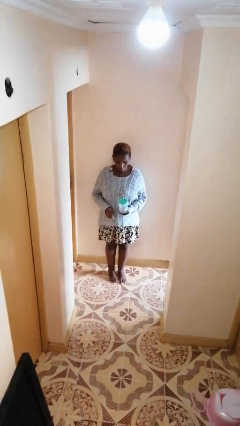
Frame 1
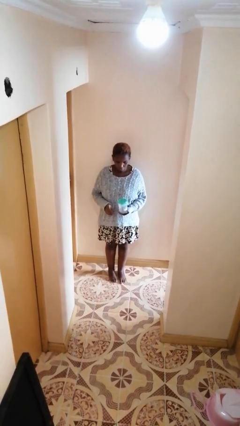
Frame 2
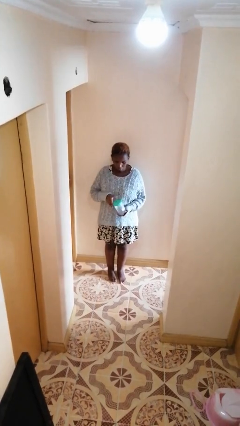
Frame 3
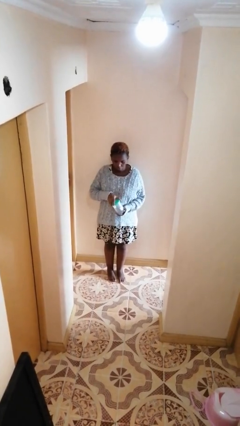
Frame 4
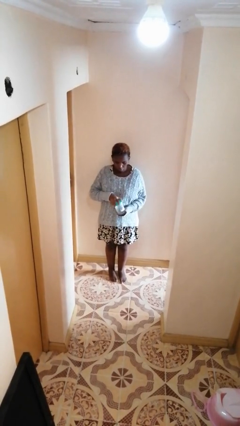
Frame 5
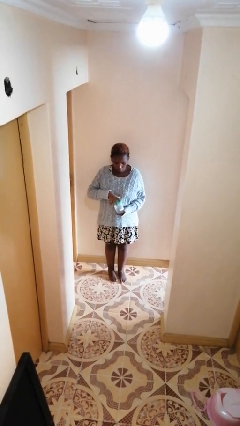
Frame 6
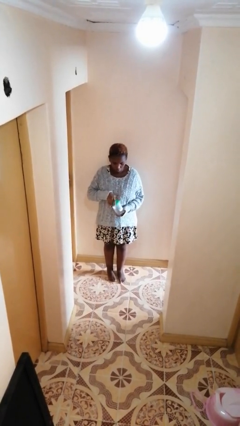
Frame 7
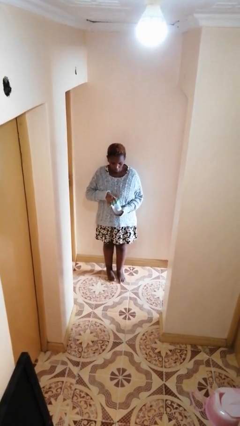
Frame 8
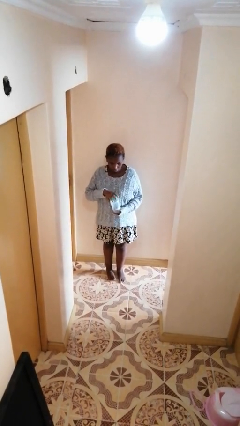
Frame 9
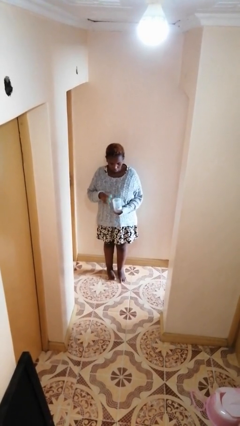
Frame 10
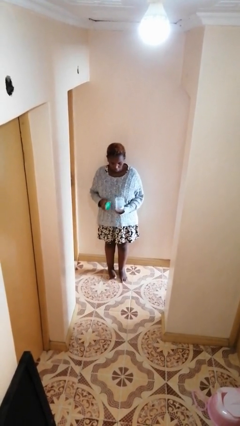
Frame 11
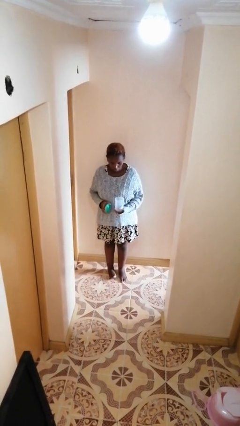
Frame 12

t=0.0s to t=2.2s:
person opens jar

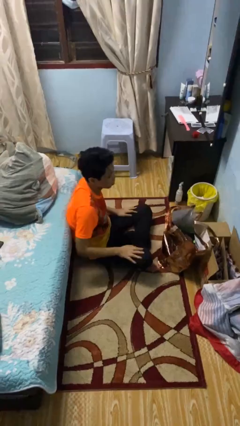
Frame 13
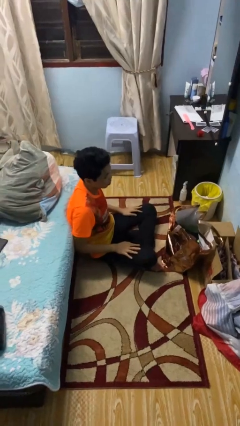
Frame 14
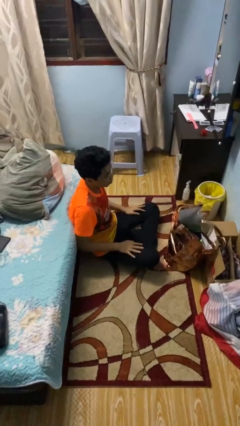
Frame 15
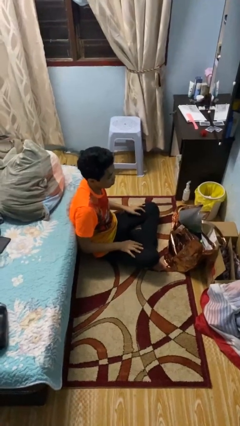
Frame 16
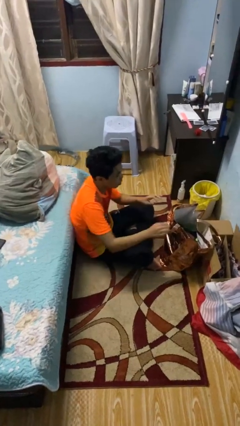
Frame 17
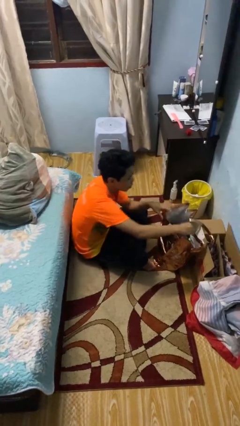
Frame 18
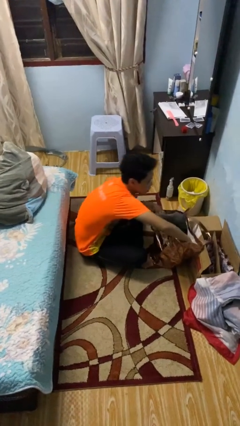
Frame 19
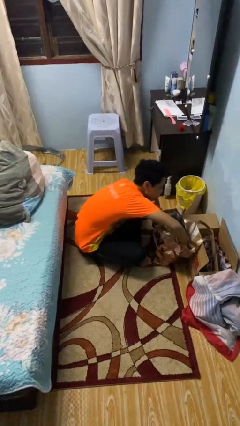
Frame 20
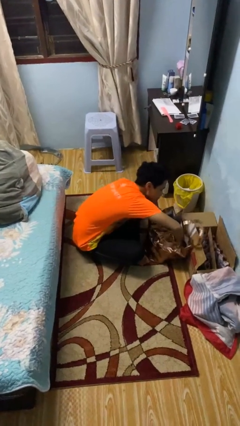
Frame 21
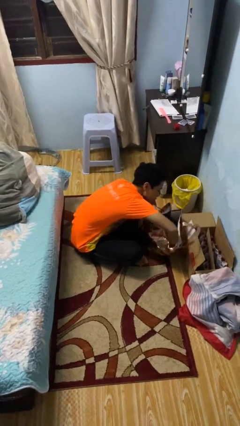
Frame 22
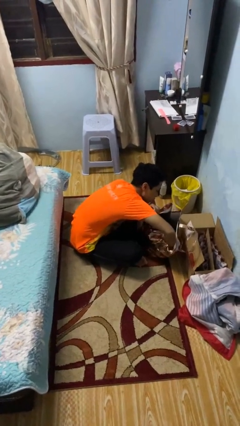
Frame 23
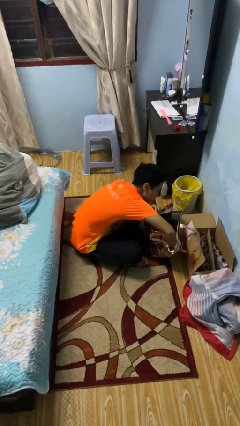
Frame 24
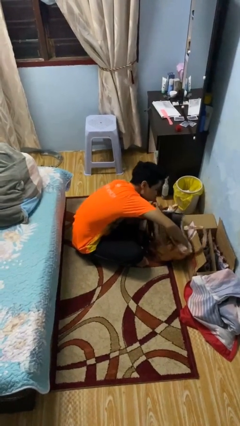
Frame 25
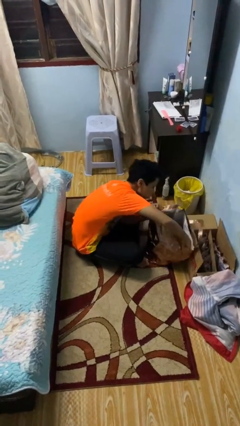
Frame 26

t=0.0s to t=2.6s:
person searches in bag

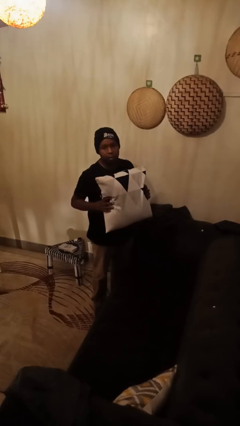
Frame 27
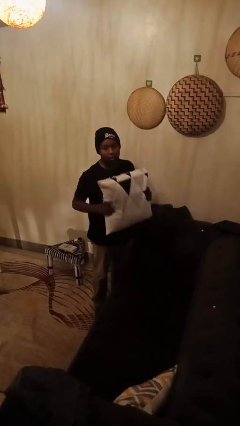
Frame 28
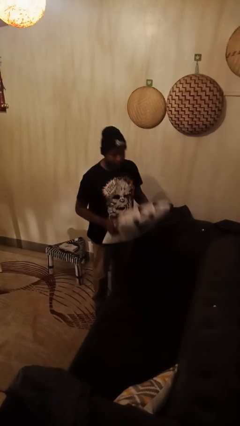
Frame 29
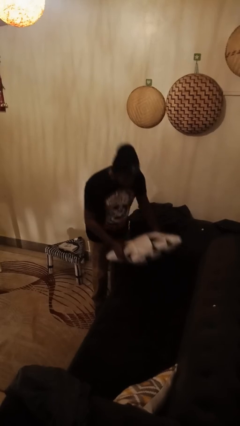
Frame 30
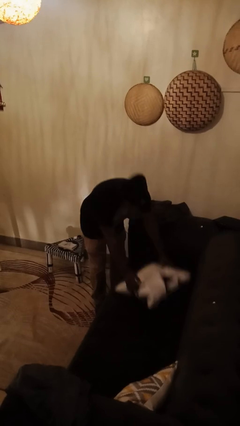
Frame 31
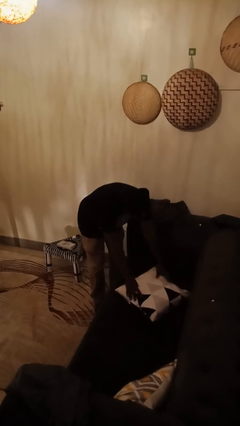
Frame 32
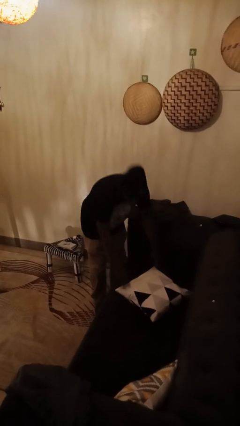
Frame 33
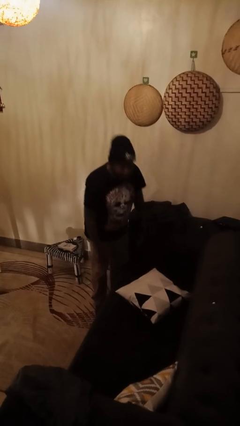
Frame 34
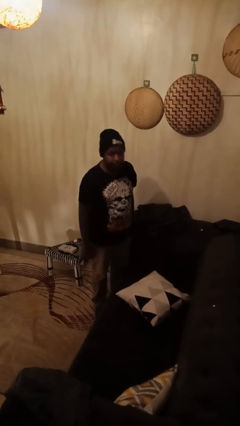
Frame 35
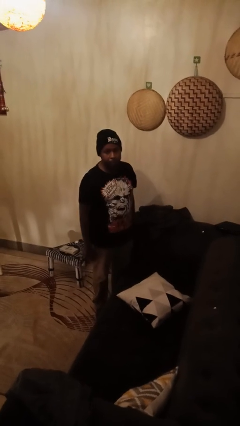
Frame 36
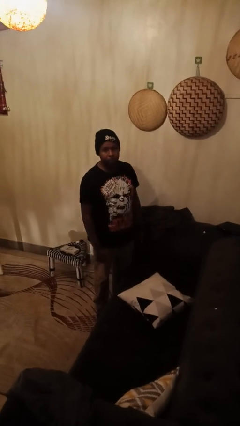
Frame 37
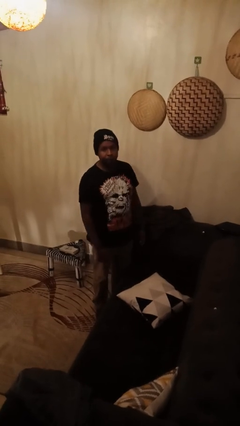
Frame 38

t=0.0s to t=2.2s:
person puts down object on couch

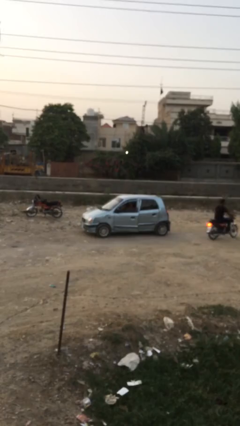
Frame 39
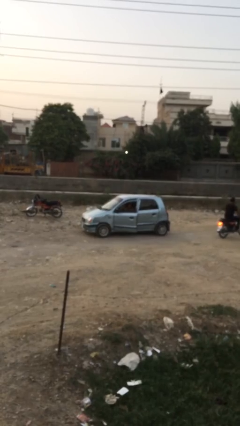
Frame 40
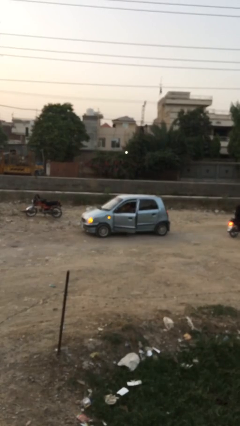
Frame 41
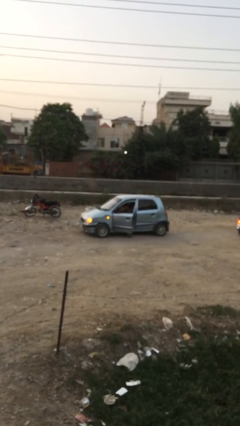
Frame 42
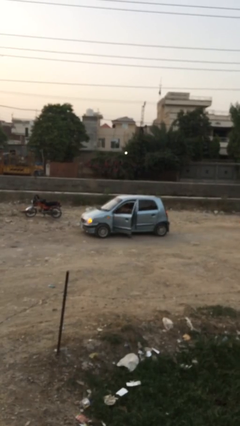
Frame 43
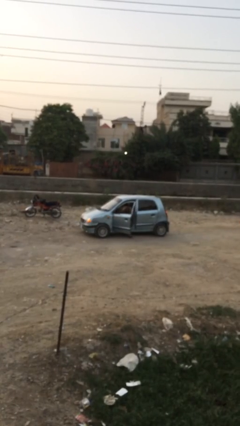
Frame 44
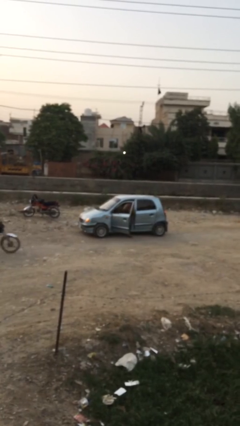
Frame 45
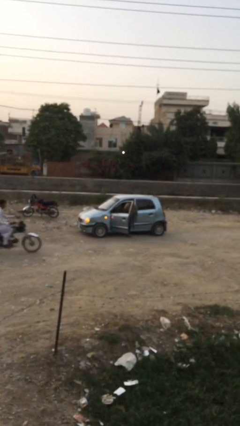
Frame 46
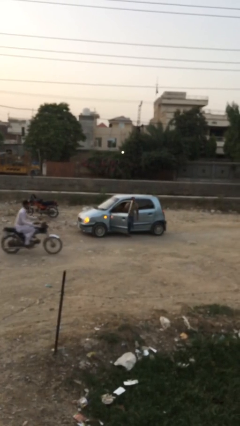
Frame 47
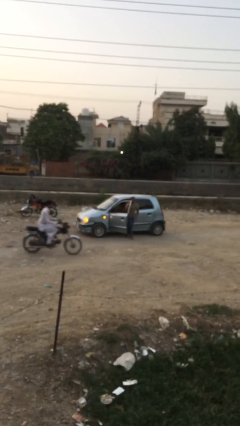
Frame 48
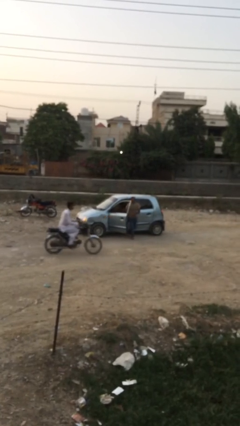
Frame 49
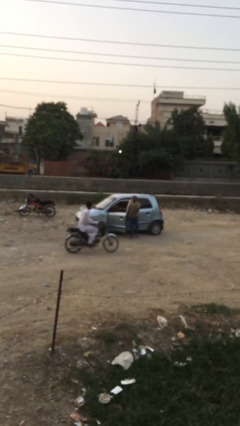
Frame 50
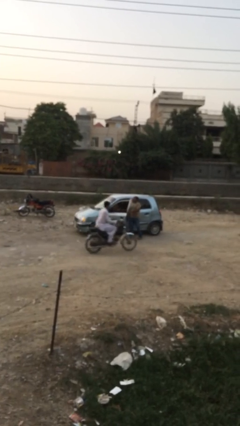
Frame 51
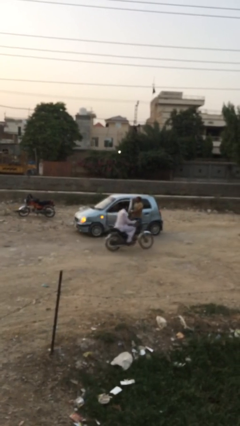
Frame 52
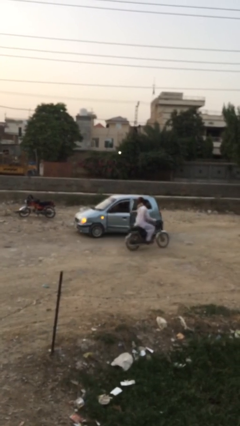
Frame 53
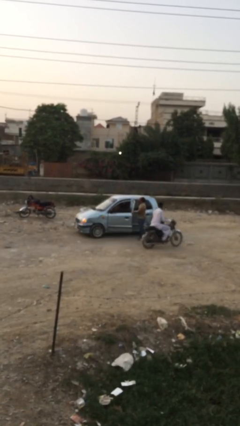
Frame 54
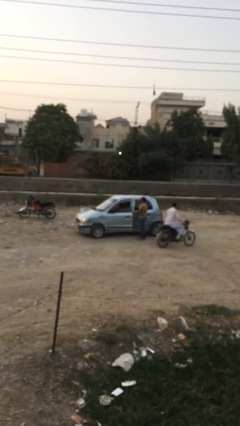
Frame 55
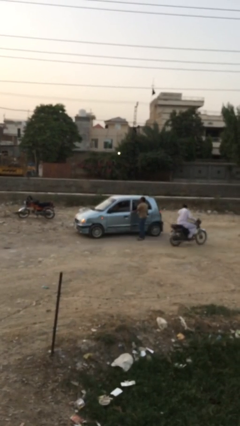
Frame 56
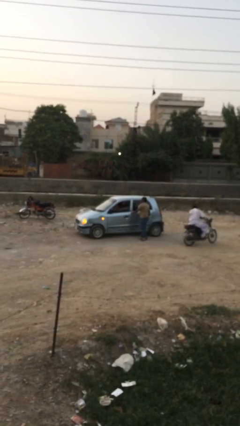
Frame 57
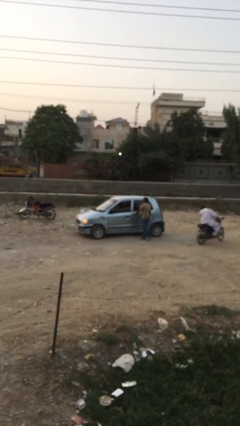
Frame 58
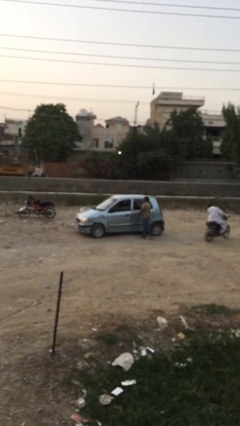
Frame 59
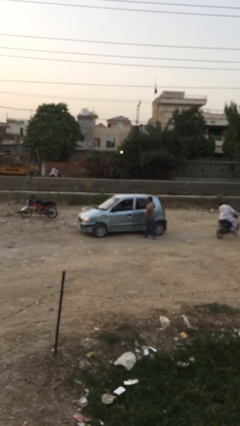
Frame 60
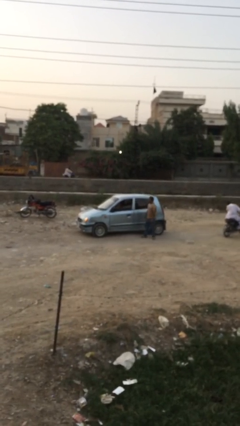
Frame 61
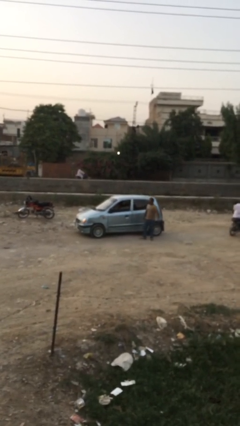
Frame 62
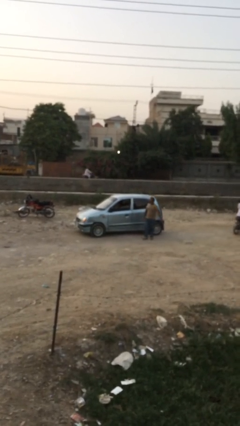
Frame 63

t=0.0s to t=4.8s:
car drops off person

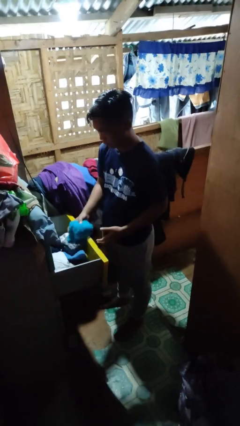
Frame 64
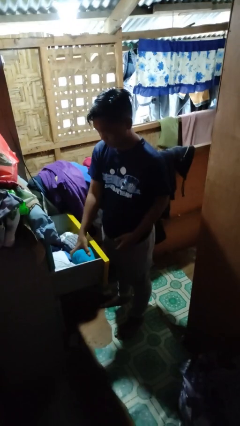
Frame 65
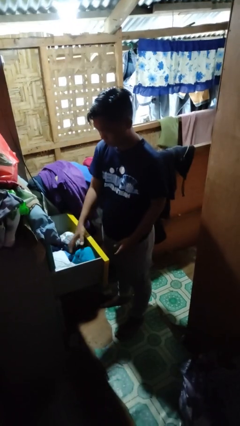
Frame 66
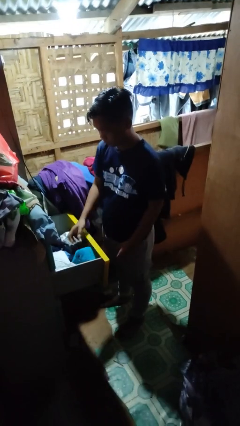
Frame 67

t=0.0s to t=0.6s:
person puts clothes into dresser

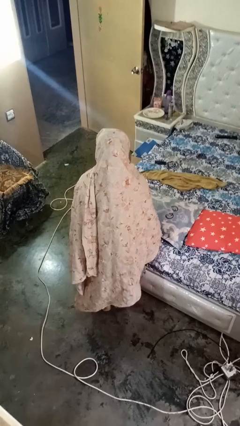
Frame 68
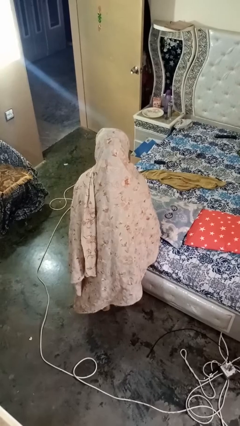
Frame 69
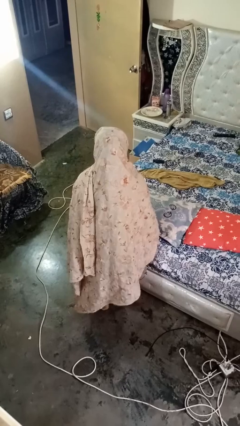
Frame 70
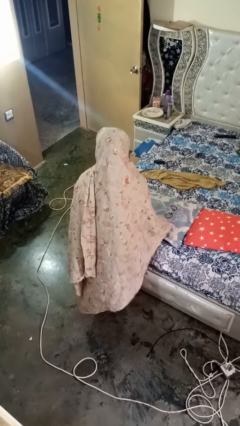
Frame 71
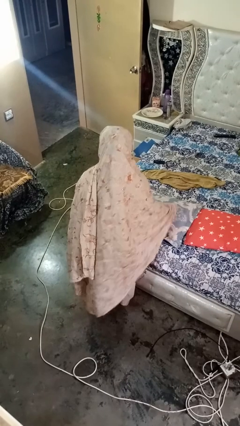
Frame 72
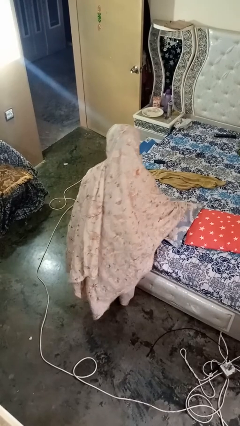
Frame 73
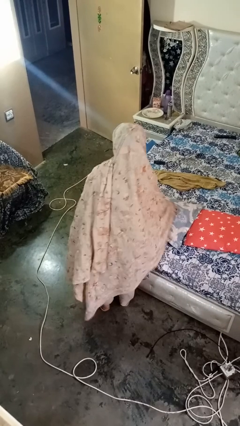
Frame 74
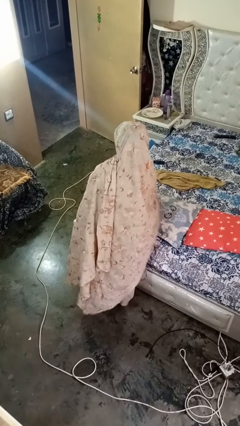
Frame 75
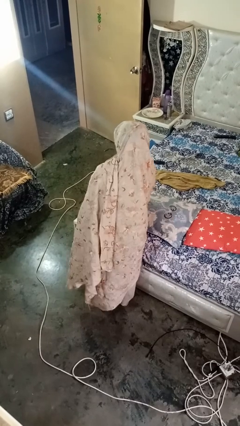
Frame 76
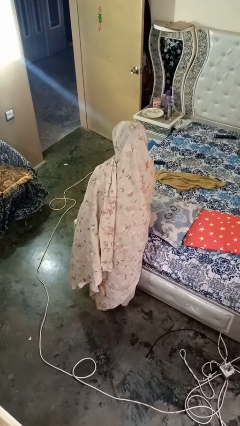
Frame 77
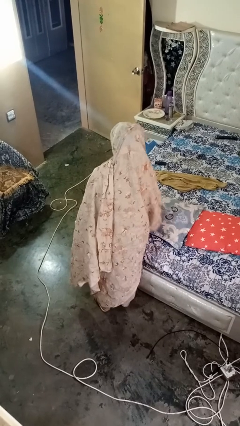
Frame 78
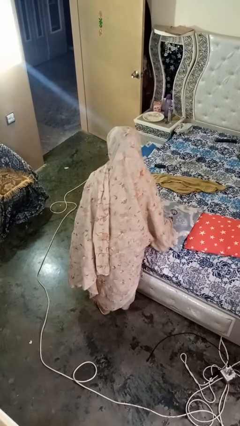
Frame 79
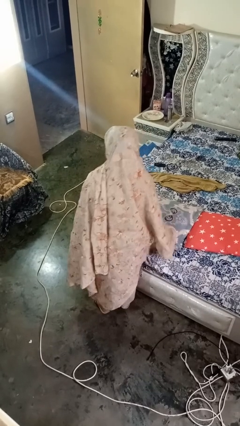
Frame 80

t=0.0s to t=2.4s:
person taps object with finger

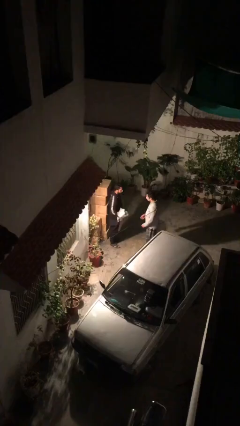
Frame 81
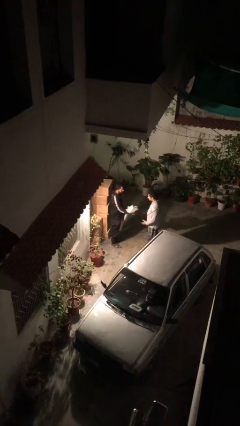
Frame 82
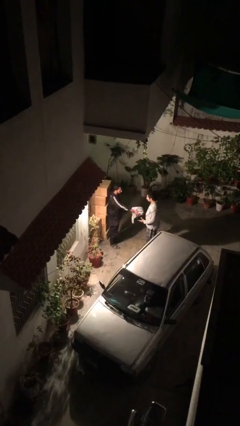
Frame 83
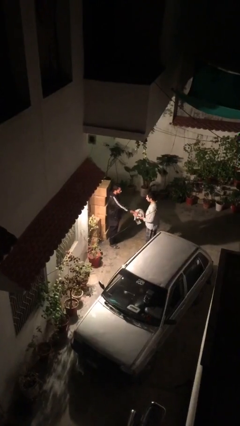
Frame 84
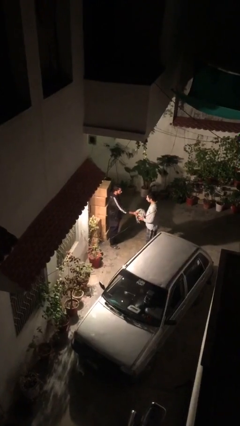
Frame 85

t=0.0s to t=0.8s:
person transfers object to person

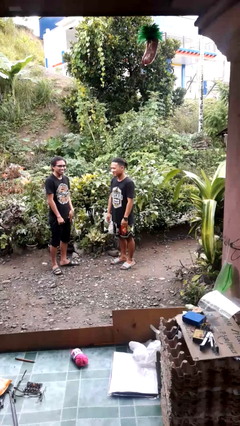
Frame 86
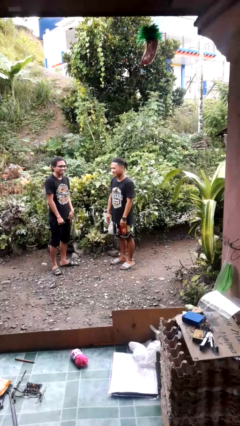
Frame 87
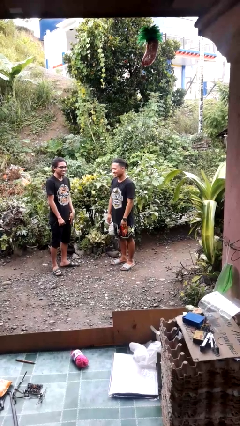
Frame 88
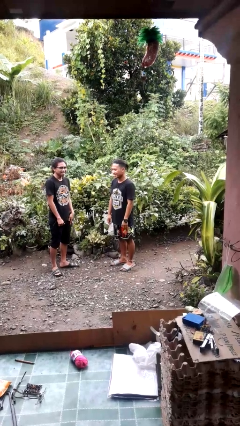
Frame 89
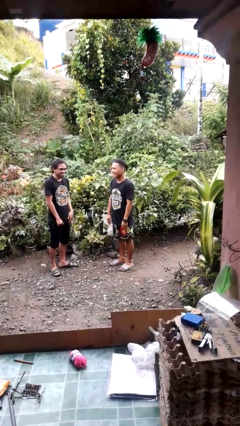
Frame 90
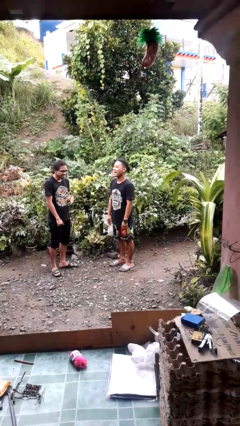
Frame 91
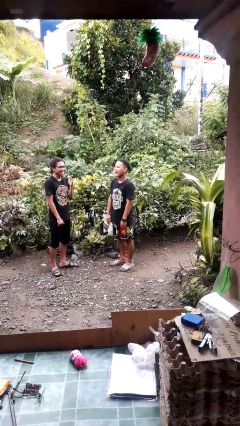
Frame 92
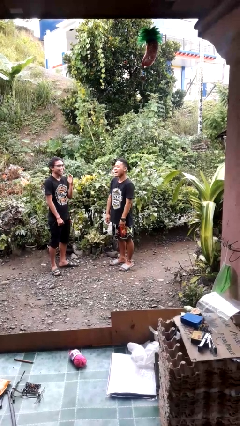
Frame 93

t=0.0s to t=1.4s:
person laughs with person
